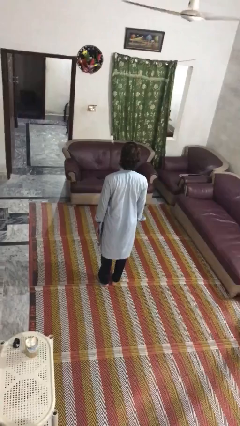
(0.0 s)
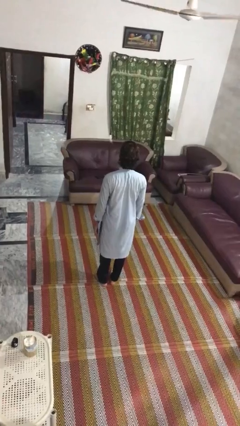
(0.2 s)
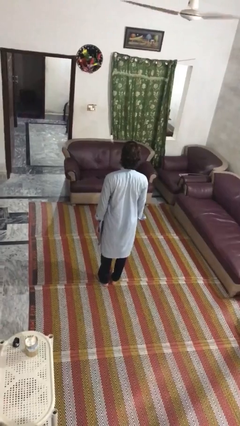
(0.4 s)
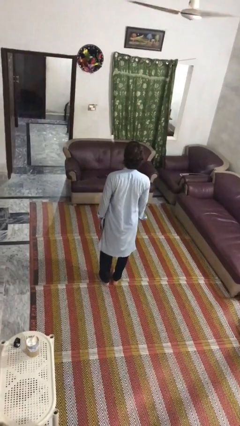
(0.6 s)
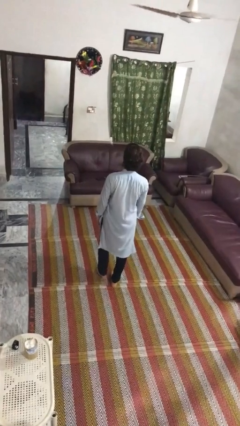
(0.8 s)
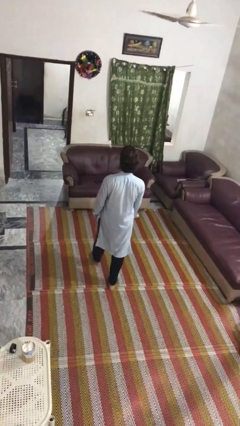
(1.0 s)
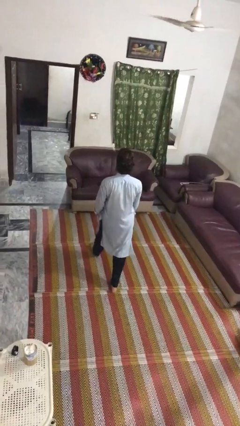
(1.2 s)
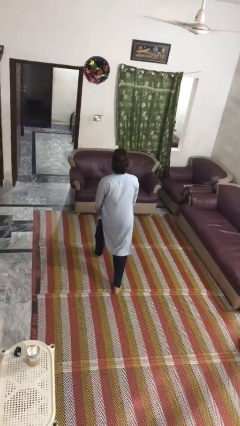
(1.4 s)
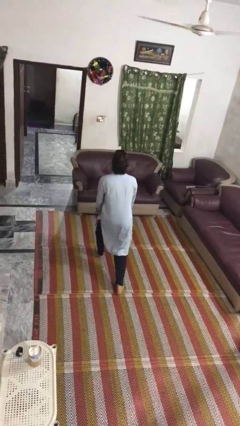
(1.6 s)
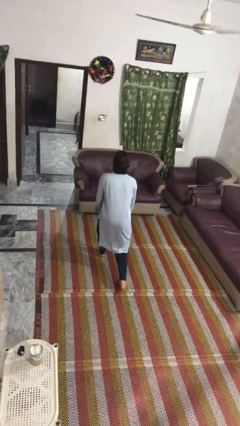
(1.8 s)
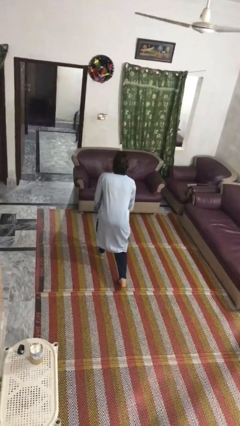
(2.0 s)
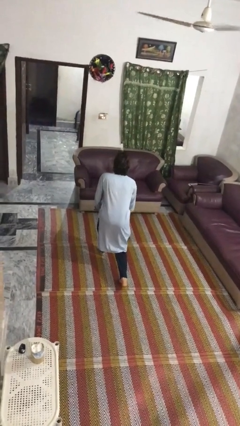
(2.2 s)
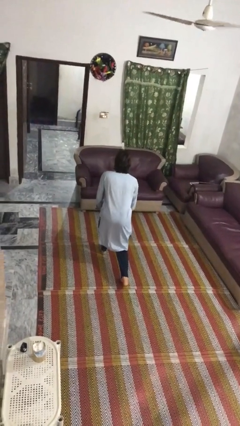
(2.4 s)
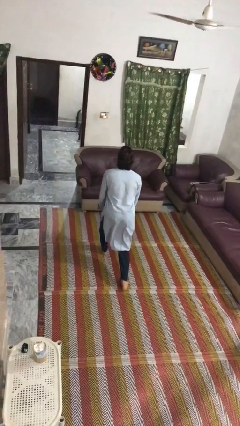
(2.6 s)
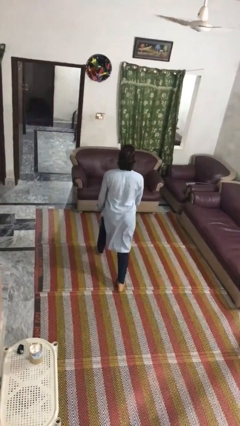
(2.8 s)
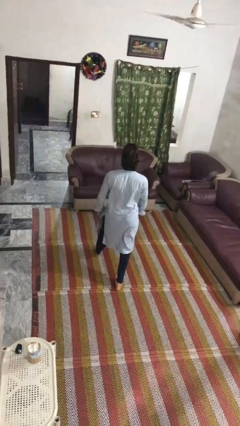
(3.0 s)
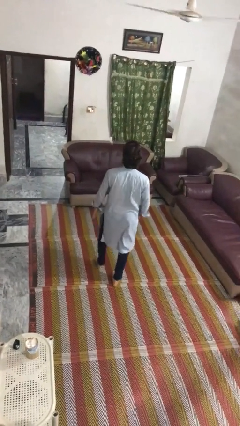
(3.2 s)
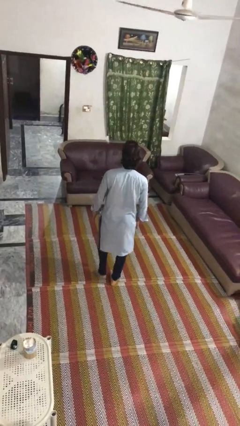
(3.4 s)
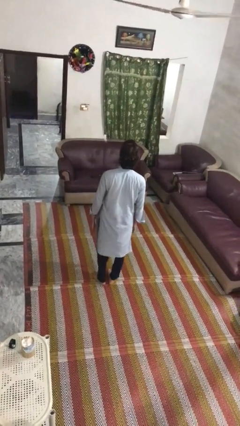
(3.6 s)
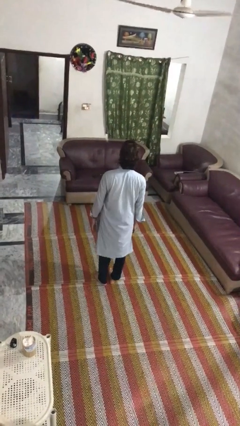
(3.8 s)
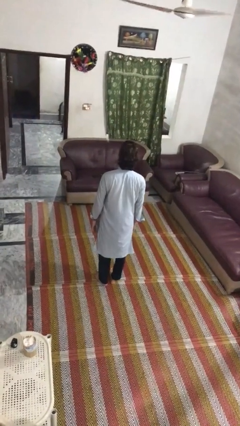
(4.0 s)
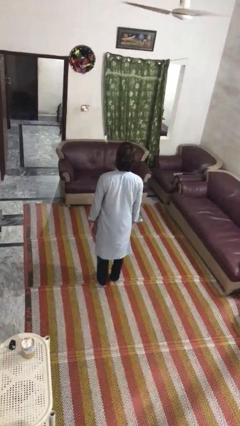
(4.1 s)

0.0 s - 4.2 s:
person exercises with lunges

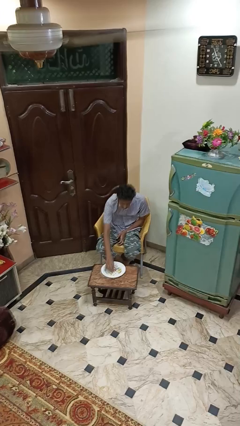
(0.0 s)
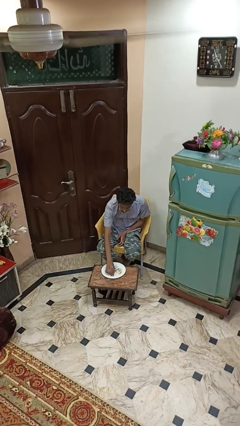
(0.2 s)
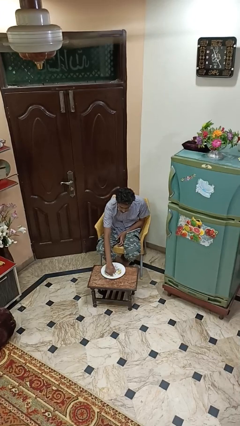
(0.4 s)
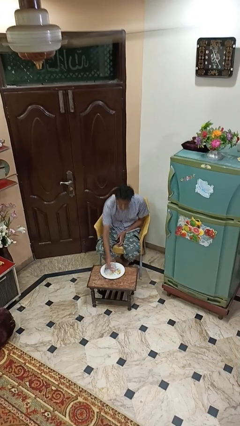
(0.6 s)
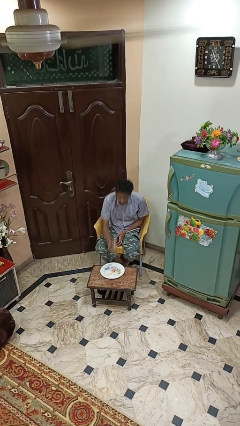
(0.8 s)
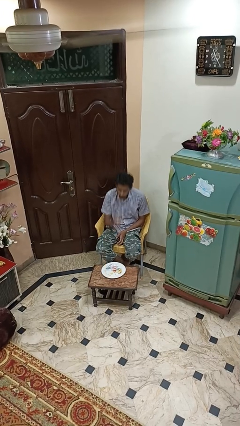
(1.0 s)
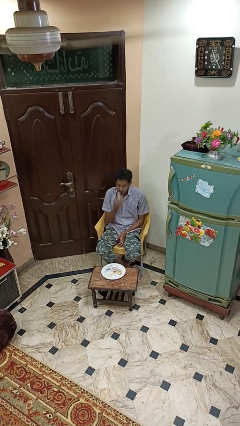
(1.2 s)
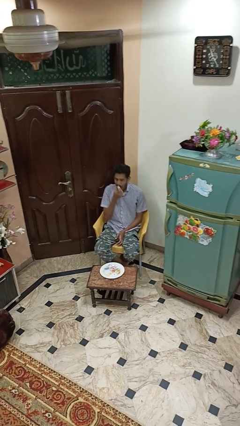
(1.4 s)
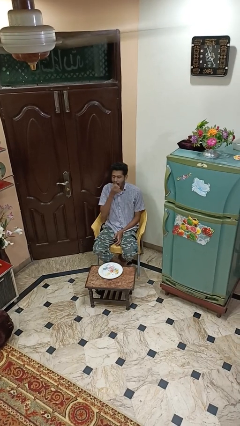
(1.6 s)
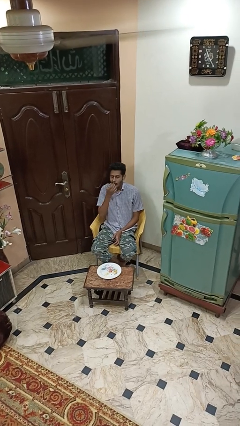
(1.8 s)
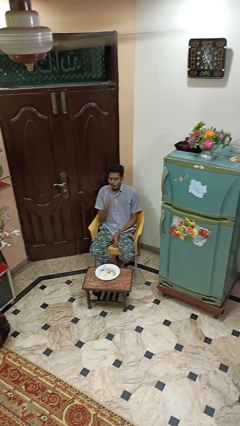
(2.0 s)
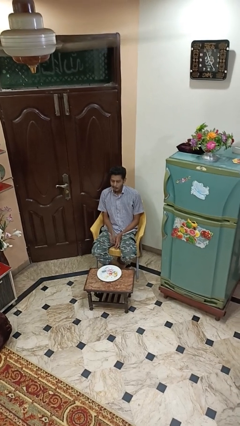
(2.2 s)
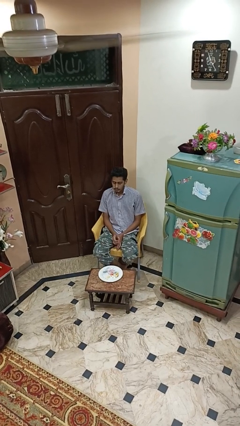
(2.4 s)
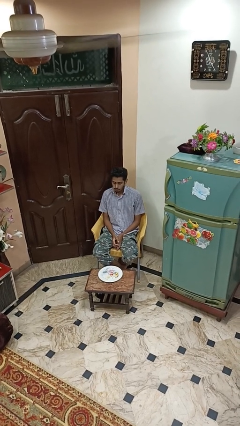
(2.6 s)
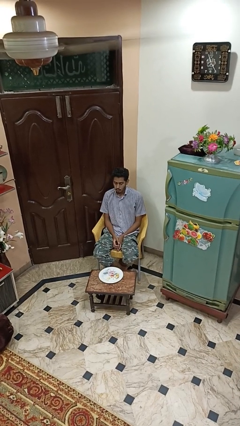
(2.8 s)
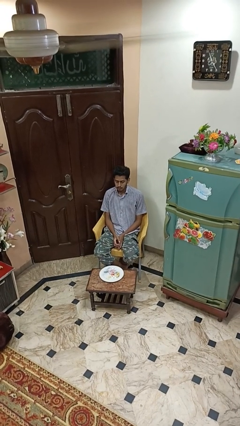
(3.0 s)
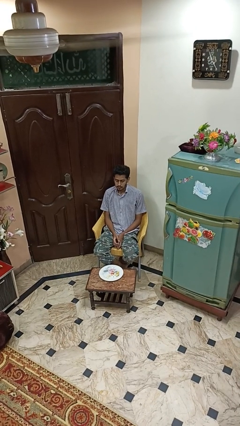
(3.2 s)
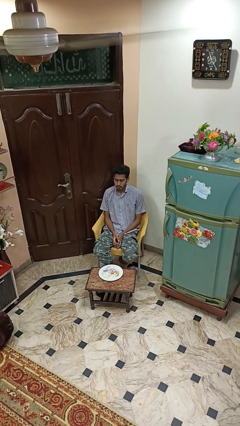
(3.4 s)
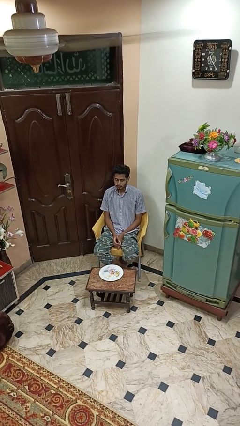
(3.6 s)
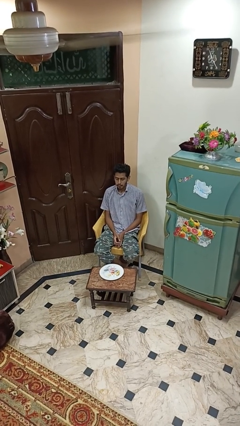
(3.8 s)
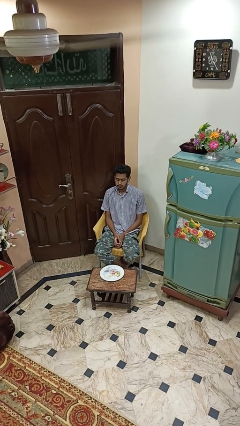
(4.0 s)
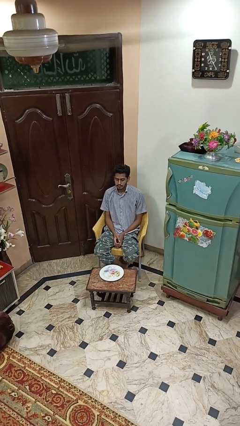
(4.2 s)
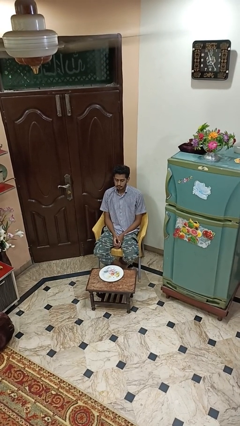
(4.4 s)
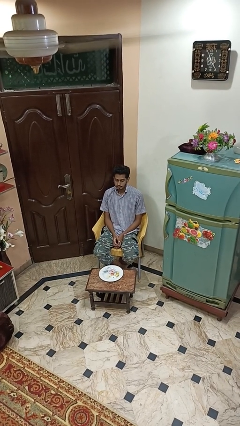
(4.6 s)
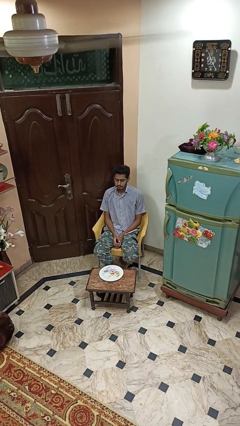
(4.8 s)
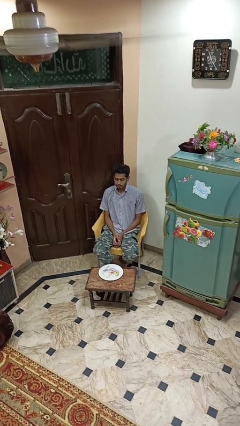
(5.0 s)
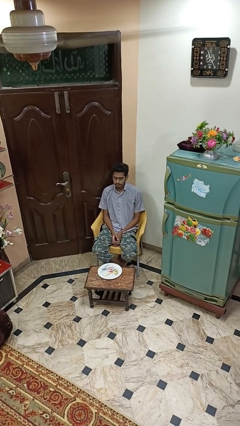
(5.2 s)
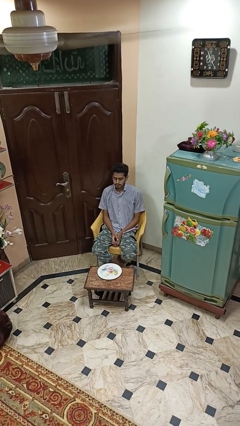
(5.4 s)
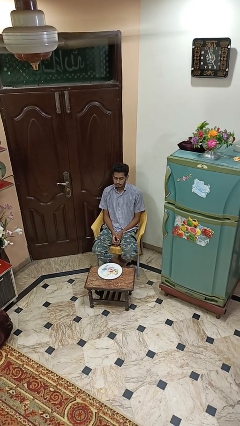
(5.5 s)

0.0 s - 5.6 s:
person eats with hands

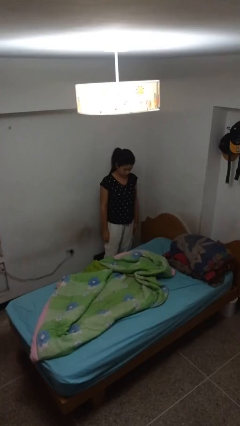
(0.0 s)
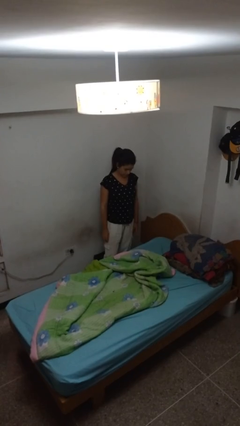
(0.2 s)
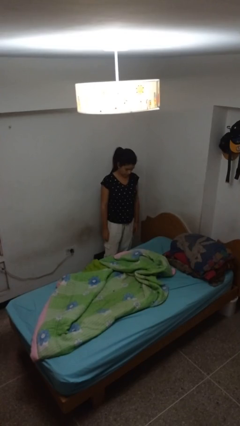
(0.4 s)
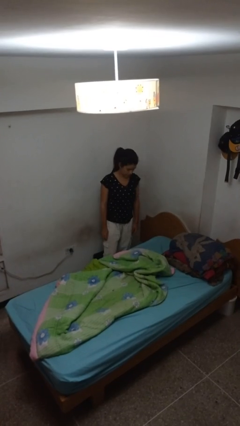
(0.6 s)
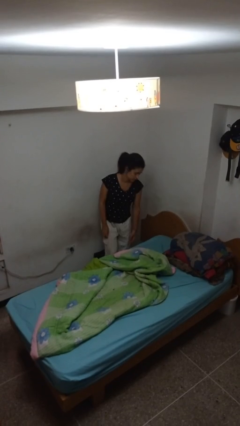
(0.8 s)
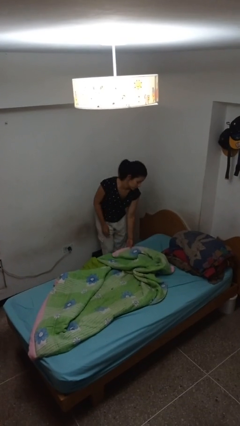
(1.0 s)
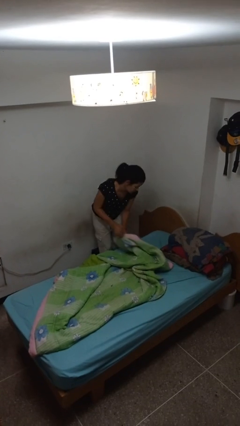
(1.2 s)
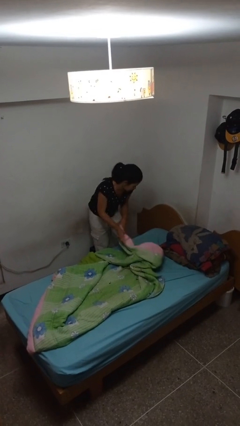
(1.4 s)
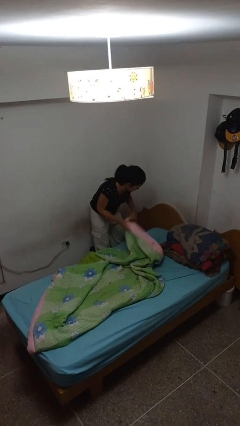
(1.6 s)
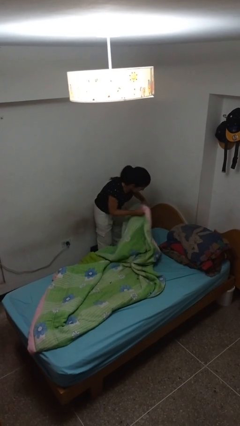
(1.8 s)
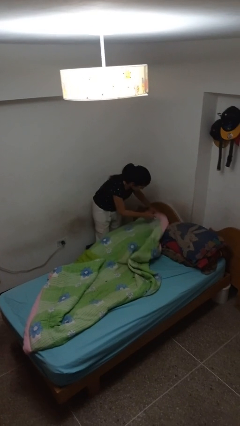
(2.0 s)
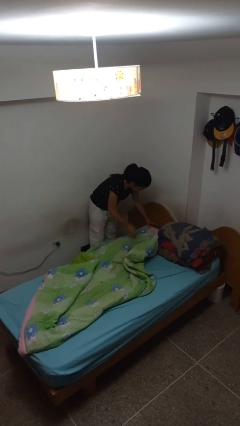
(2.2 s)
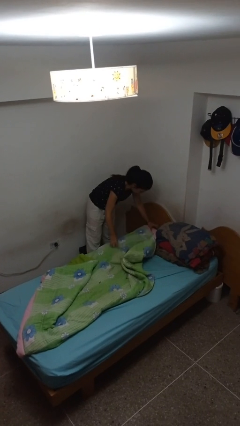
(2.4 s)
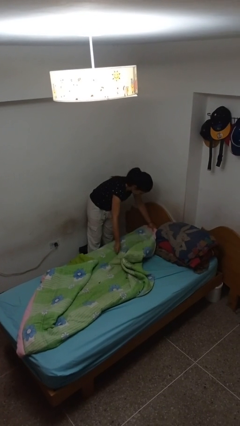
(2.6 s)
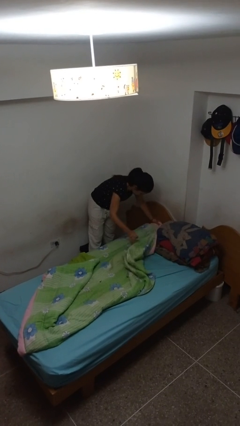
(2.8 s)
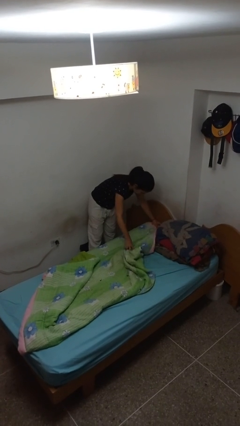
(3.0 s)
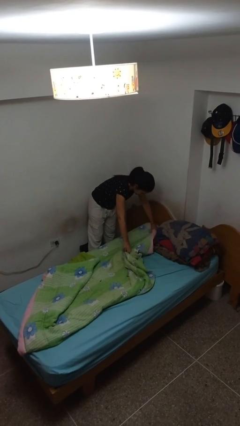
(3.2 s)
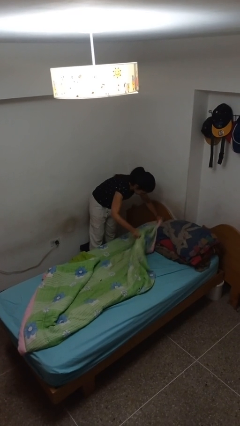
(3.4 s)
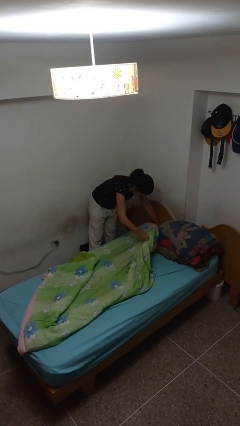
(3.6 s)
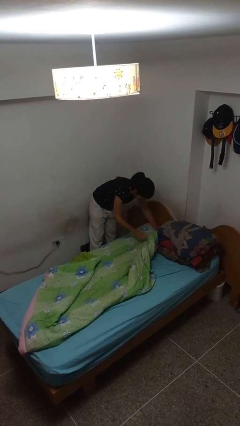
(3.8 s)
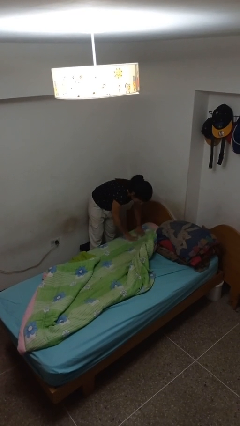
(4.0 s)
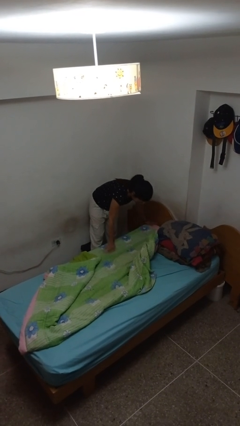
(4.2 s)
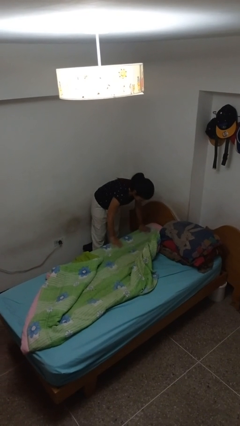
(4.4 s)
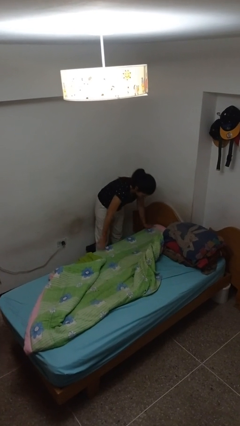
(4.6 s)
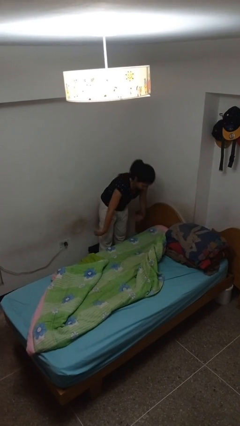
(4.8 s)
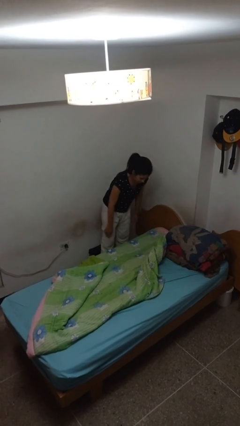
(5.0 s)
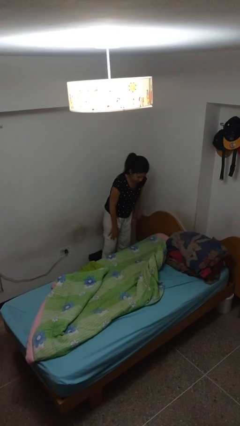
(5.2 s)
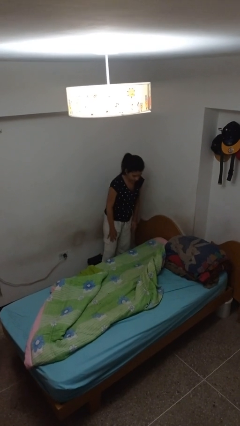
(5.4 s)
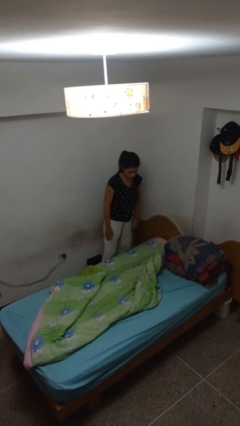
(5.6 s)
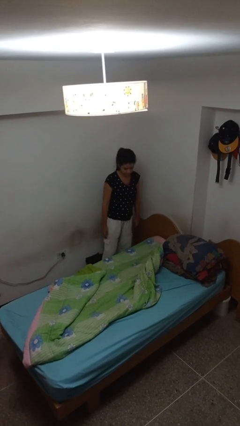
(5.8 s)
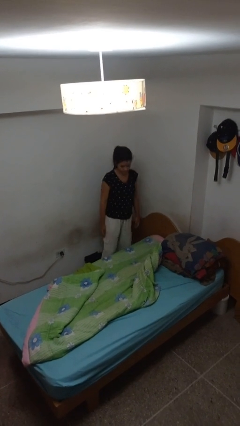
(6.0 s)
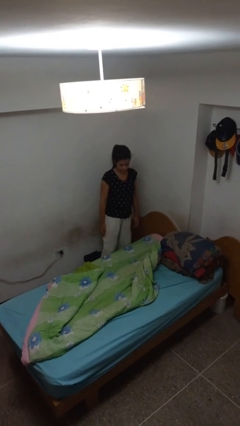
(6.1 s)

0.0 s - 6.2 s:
person makes bed

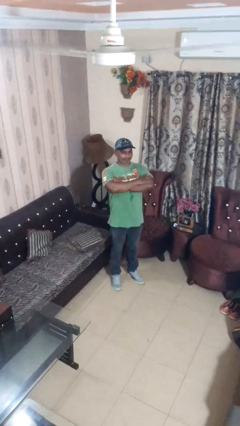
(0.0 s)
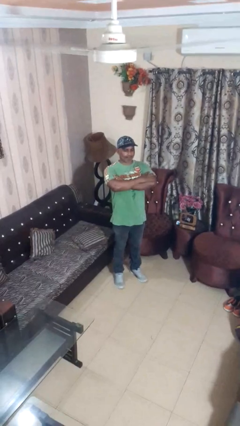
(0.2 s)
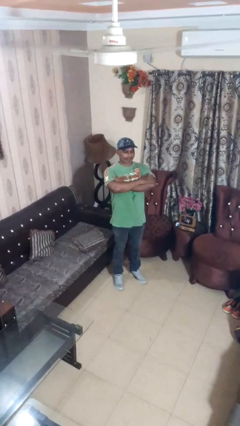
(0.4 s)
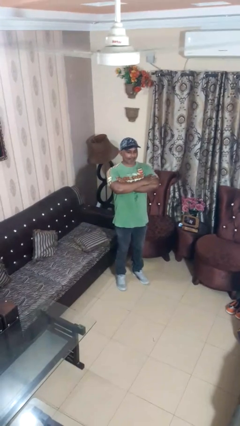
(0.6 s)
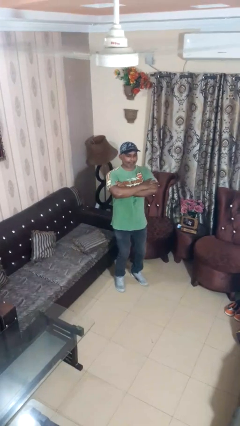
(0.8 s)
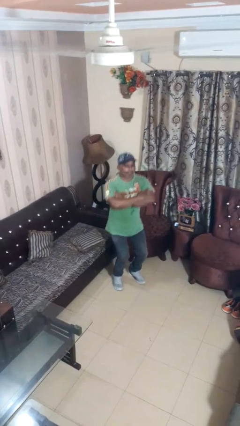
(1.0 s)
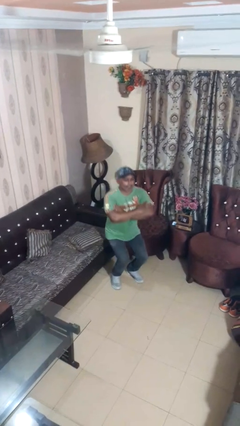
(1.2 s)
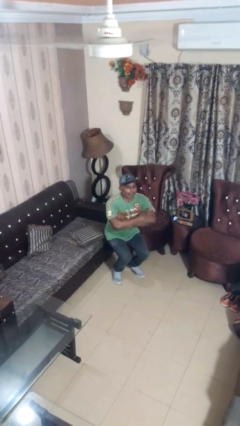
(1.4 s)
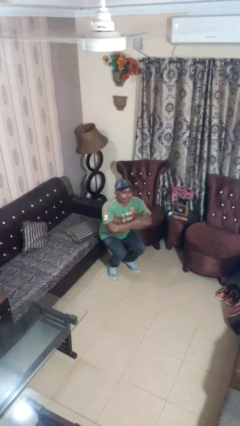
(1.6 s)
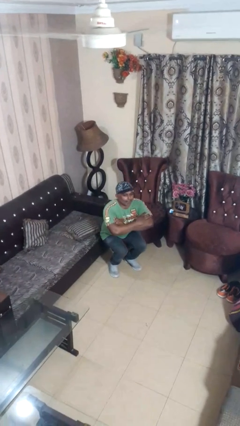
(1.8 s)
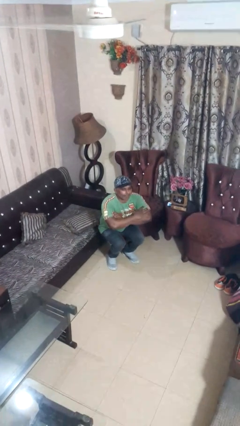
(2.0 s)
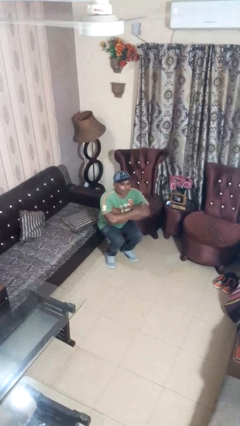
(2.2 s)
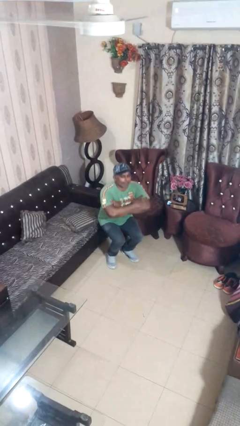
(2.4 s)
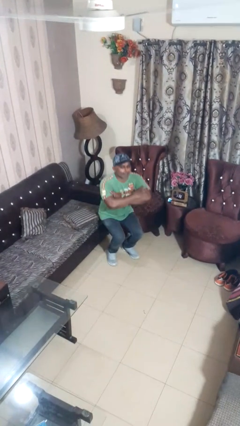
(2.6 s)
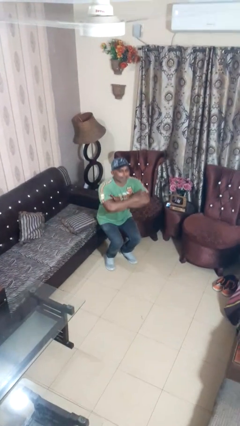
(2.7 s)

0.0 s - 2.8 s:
person squats
